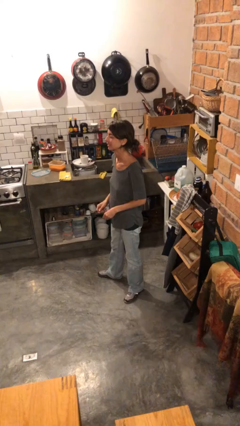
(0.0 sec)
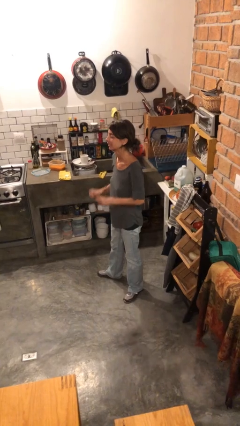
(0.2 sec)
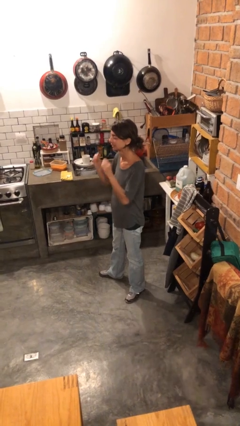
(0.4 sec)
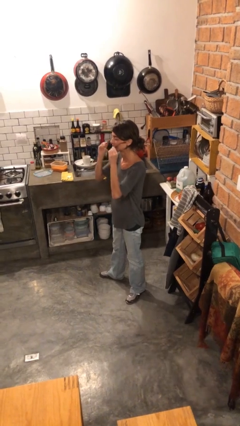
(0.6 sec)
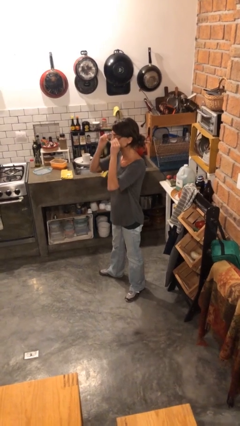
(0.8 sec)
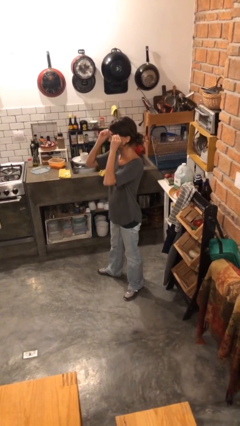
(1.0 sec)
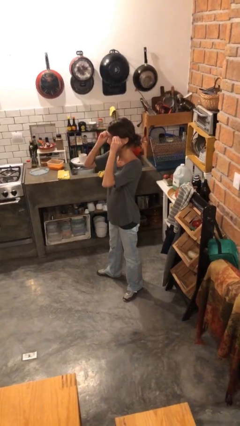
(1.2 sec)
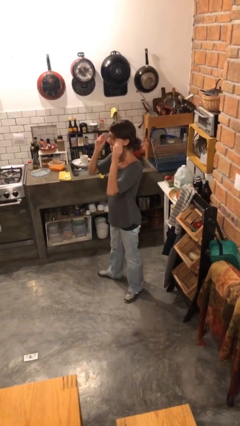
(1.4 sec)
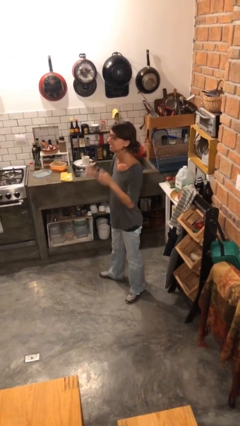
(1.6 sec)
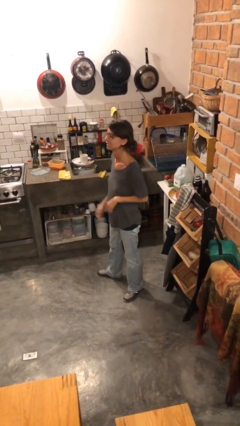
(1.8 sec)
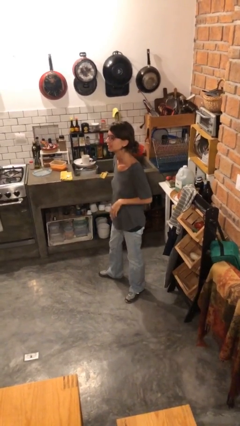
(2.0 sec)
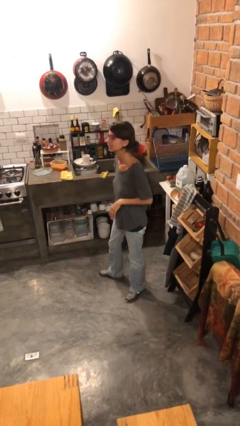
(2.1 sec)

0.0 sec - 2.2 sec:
person puts on glasses

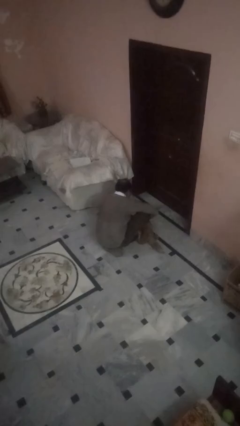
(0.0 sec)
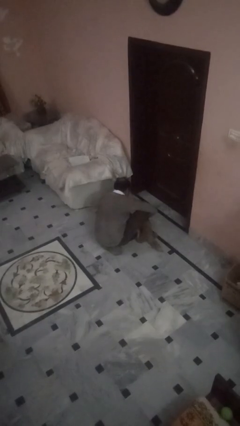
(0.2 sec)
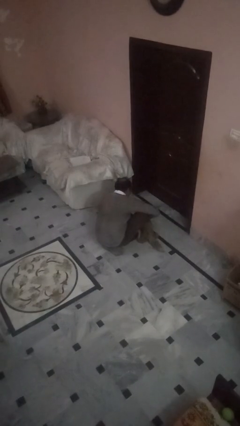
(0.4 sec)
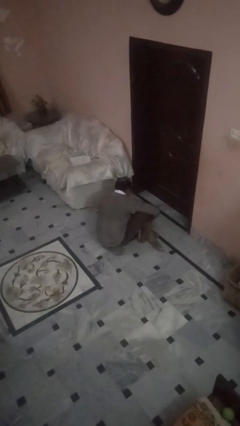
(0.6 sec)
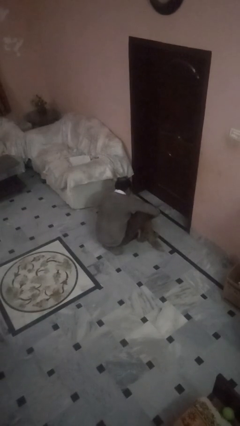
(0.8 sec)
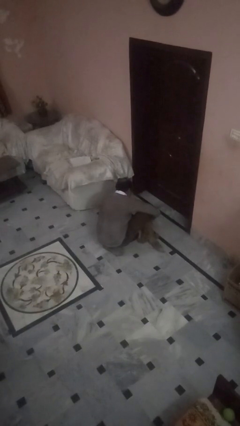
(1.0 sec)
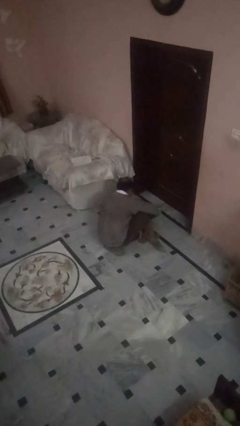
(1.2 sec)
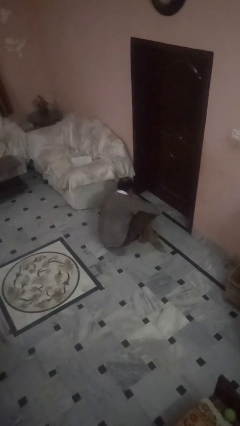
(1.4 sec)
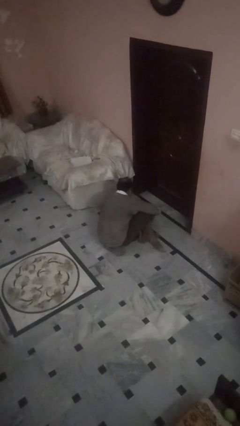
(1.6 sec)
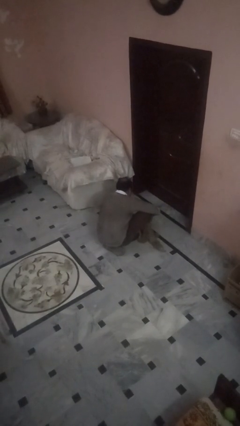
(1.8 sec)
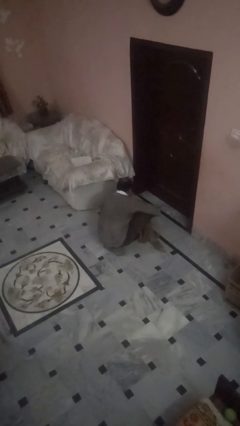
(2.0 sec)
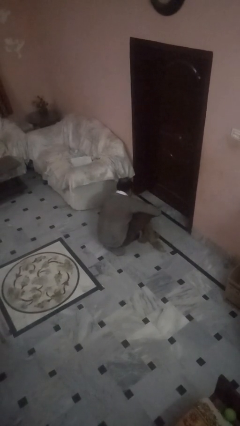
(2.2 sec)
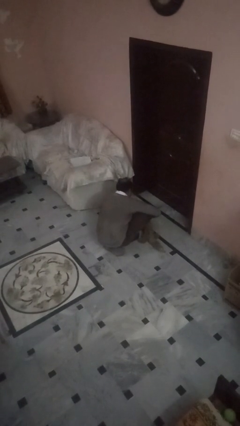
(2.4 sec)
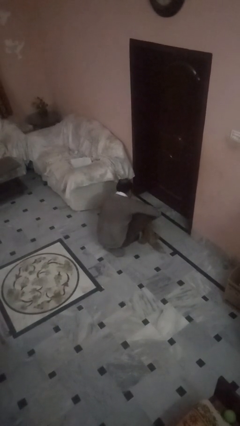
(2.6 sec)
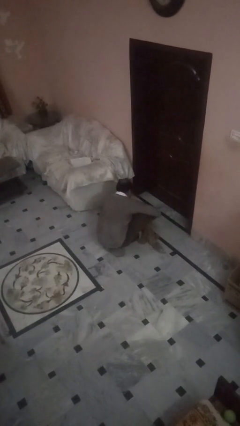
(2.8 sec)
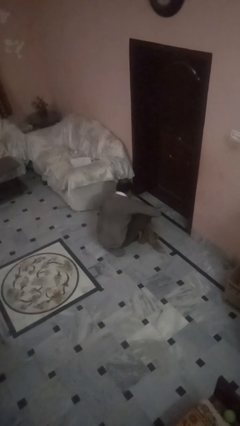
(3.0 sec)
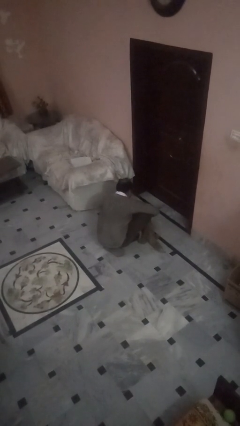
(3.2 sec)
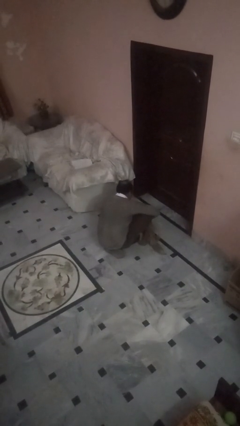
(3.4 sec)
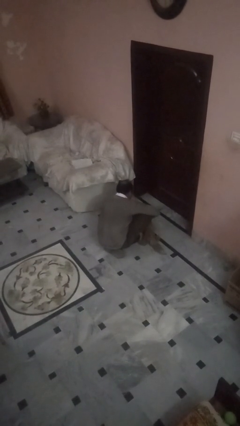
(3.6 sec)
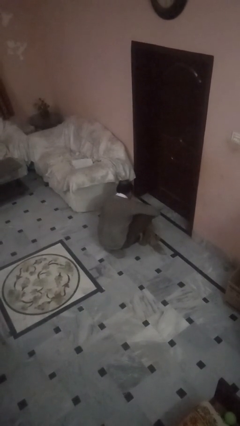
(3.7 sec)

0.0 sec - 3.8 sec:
person unattaches leash from dog

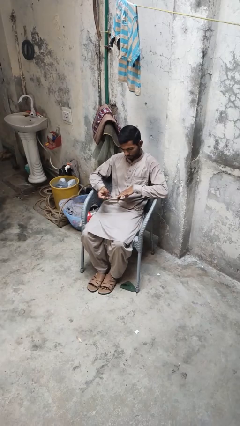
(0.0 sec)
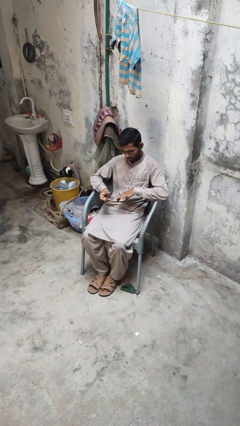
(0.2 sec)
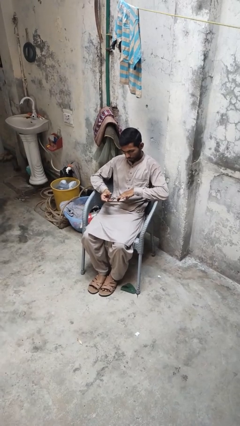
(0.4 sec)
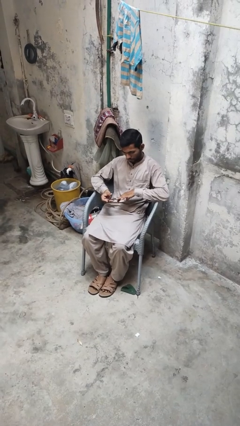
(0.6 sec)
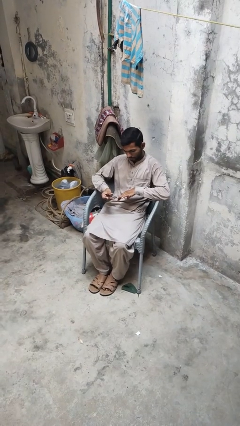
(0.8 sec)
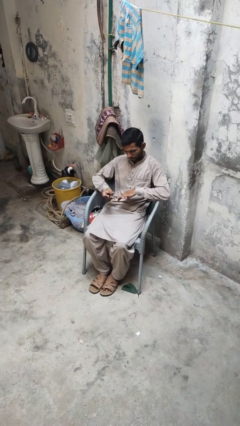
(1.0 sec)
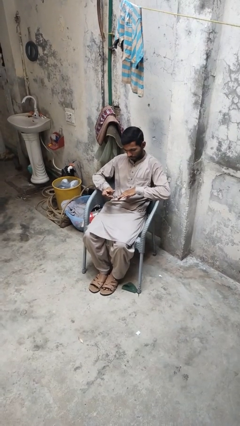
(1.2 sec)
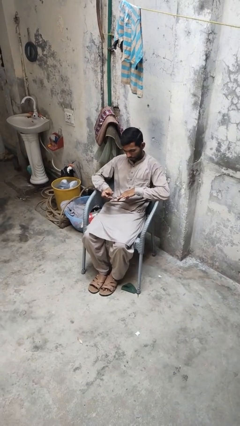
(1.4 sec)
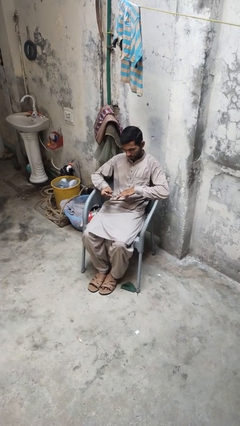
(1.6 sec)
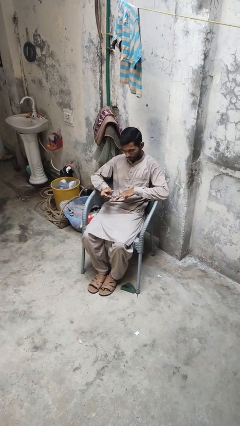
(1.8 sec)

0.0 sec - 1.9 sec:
person clips fingernails

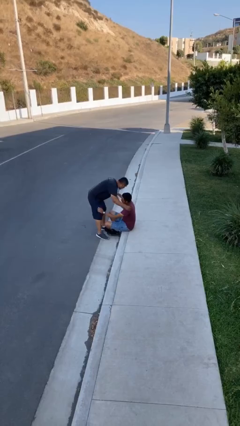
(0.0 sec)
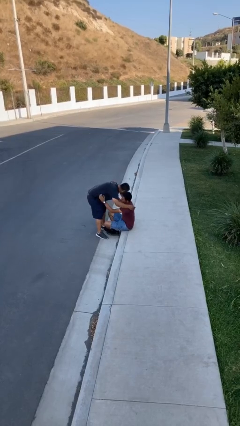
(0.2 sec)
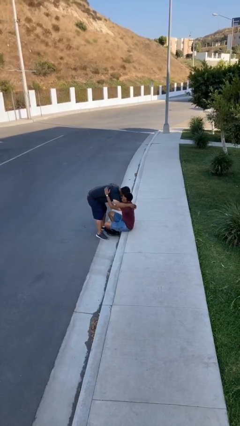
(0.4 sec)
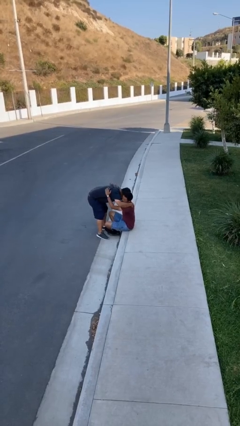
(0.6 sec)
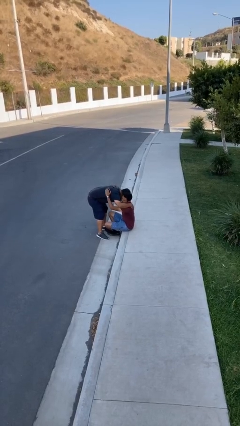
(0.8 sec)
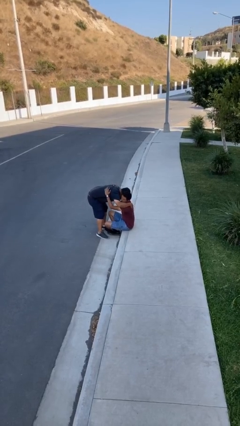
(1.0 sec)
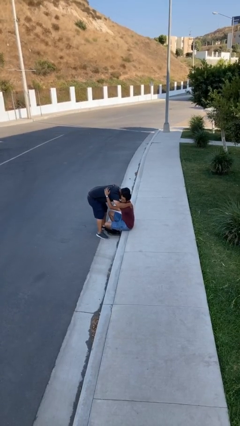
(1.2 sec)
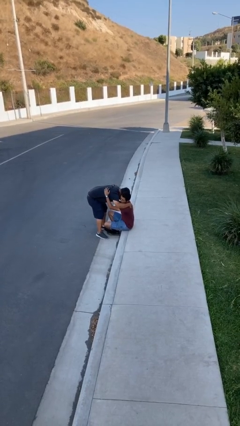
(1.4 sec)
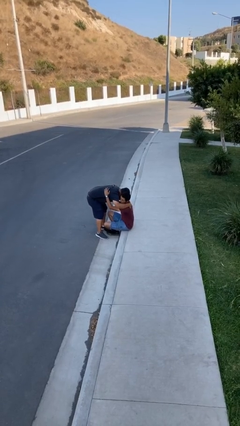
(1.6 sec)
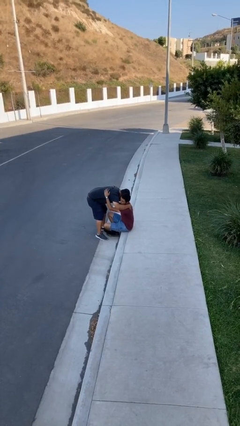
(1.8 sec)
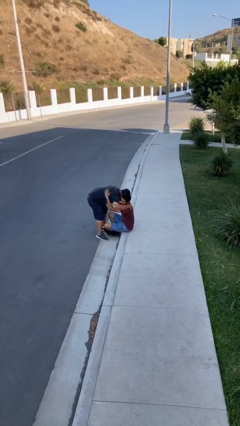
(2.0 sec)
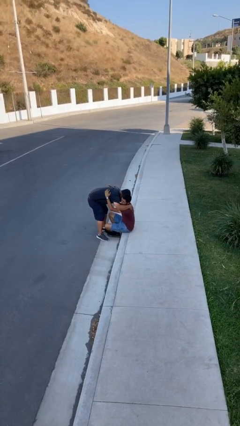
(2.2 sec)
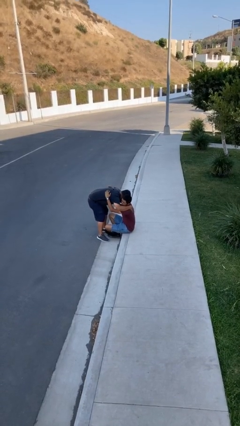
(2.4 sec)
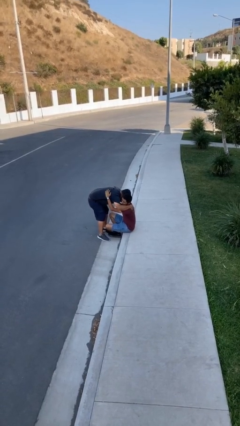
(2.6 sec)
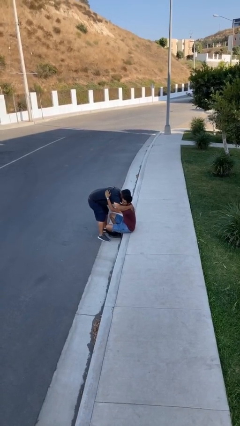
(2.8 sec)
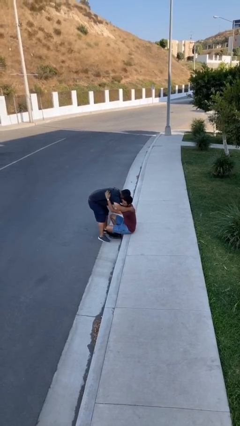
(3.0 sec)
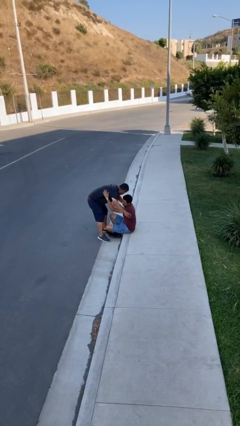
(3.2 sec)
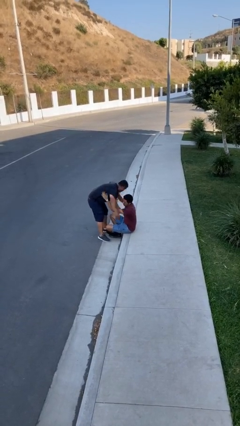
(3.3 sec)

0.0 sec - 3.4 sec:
person embraces person

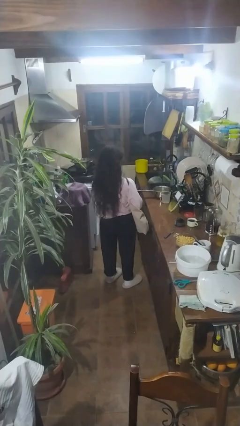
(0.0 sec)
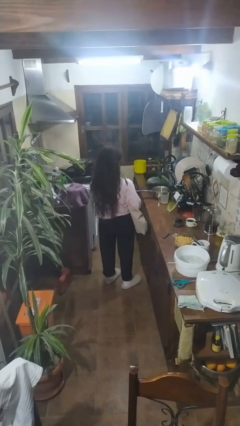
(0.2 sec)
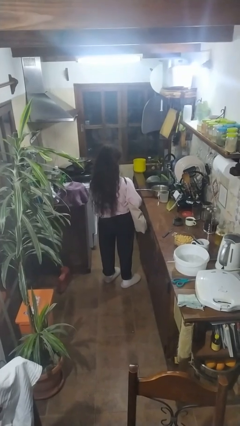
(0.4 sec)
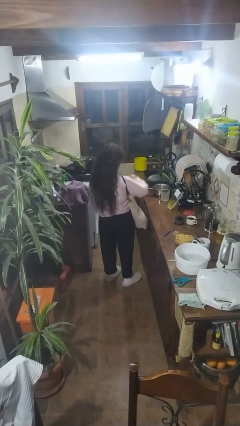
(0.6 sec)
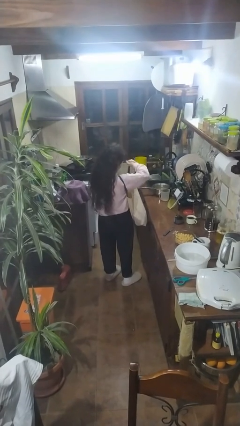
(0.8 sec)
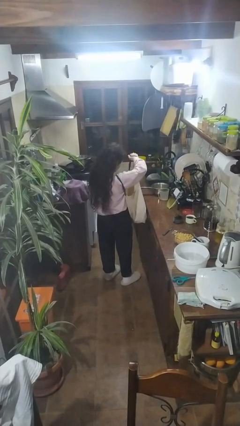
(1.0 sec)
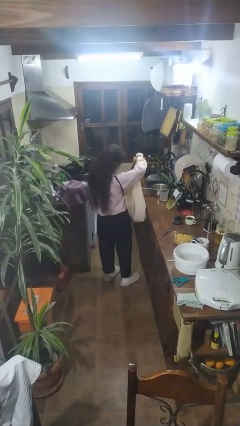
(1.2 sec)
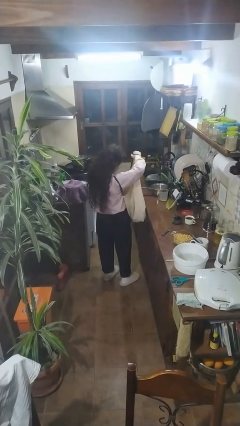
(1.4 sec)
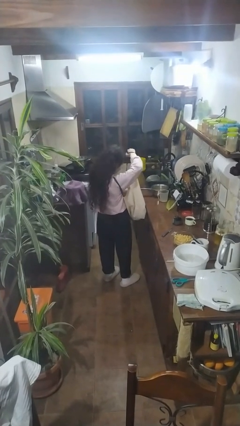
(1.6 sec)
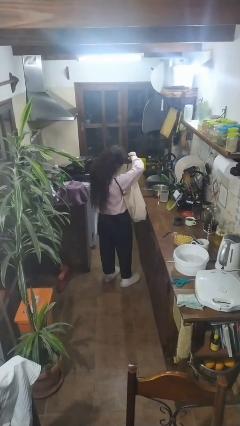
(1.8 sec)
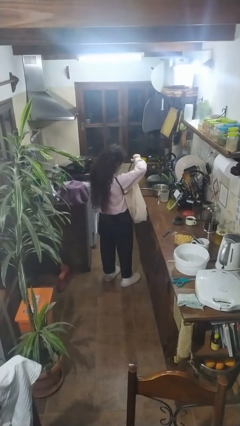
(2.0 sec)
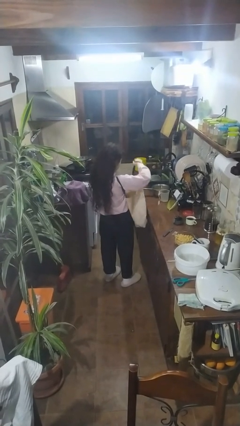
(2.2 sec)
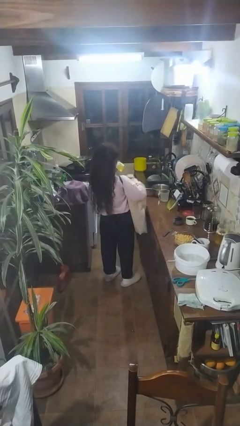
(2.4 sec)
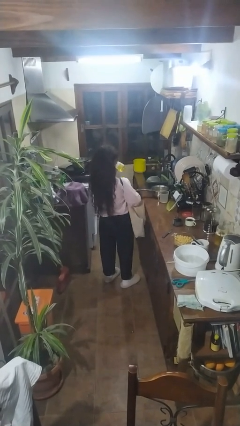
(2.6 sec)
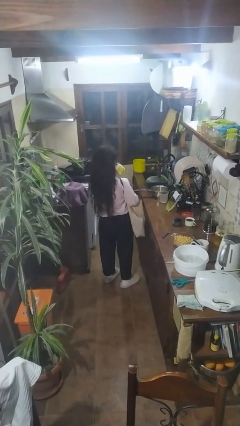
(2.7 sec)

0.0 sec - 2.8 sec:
person takes object from bag

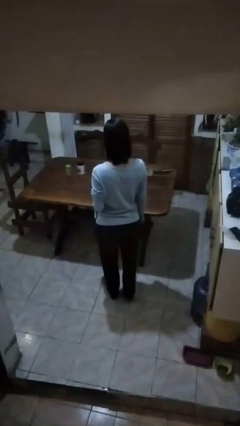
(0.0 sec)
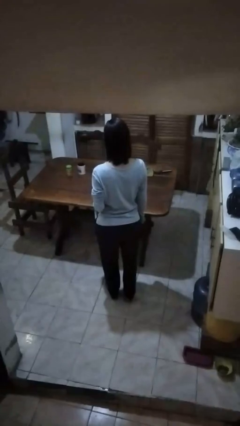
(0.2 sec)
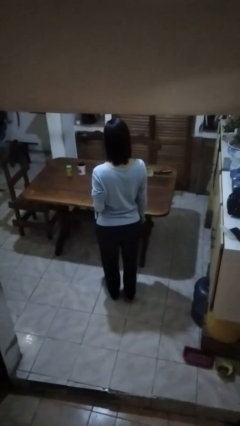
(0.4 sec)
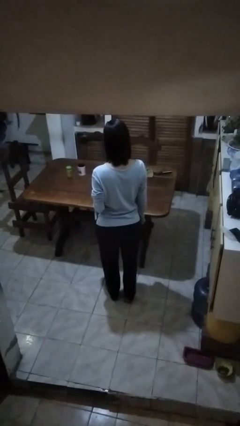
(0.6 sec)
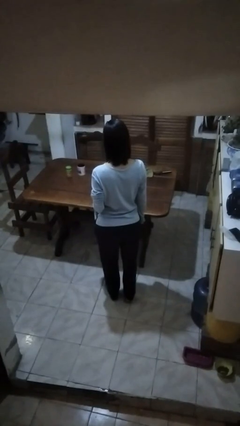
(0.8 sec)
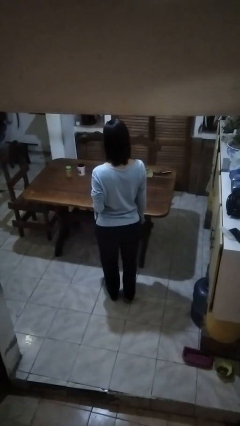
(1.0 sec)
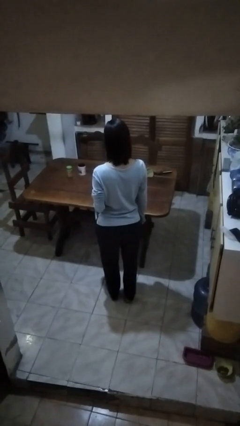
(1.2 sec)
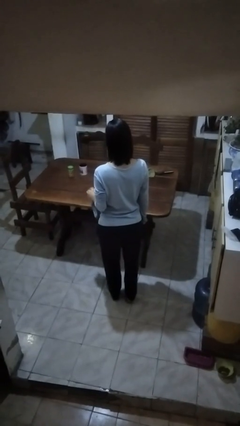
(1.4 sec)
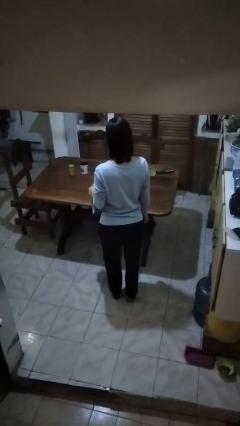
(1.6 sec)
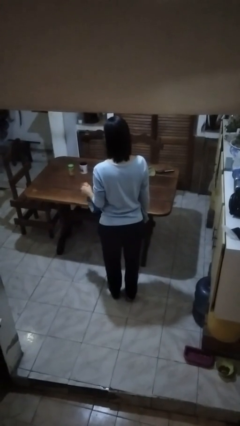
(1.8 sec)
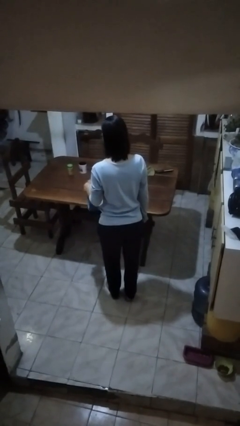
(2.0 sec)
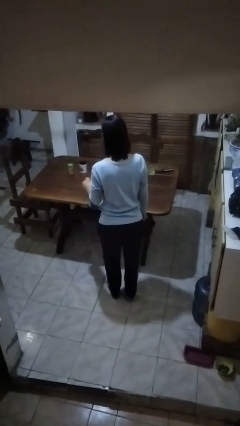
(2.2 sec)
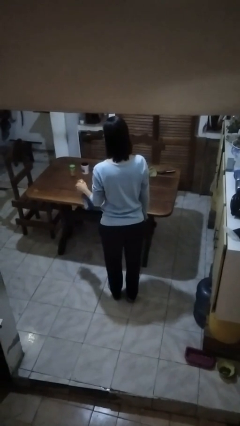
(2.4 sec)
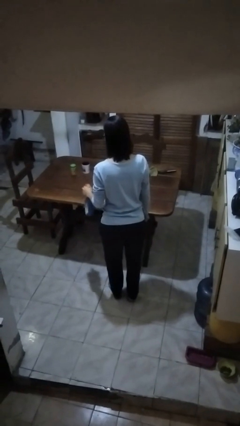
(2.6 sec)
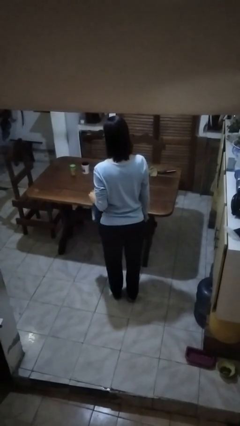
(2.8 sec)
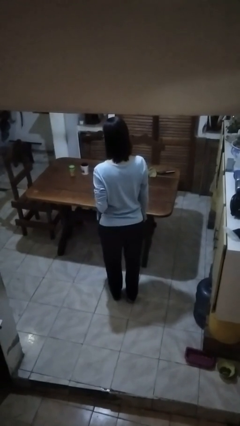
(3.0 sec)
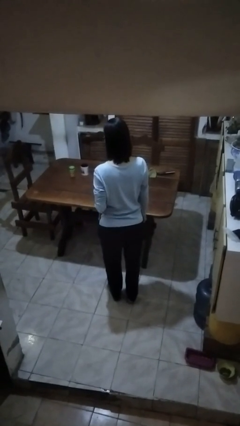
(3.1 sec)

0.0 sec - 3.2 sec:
person sprays from bottle
